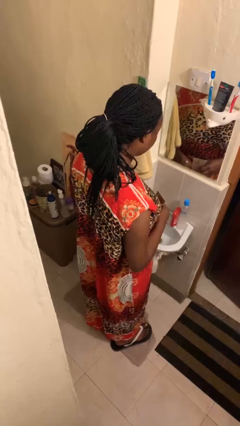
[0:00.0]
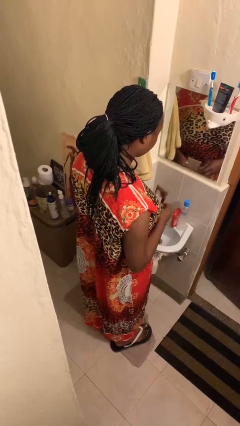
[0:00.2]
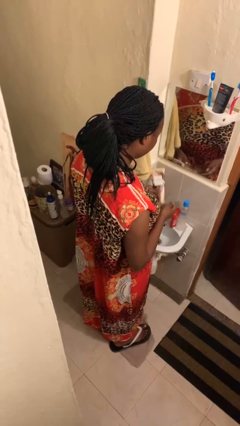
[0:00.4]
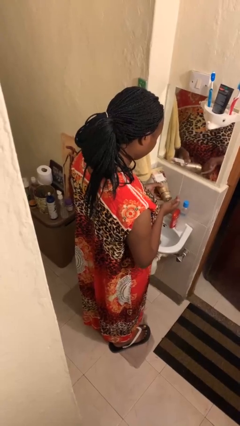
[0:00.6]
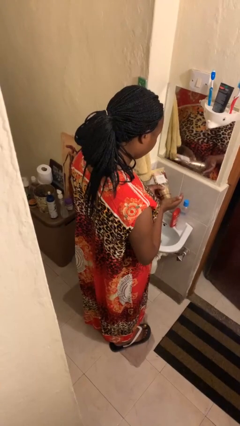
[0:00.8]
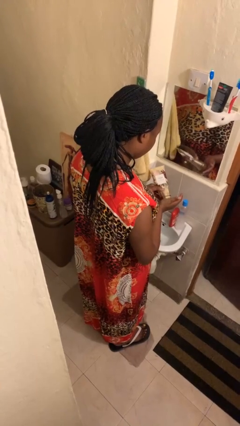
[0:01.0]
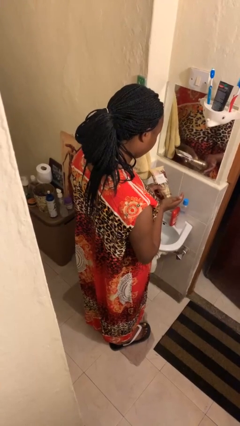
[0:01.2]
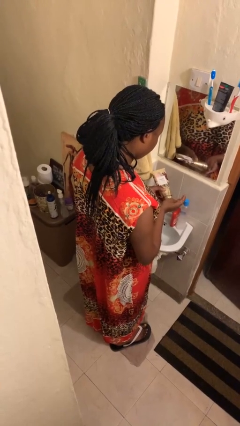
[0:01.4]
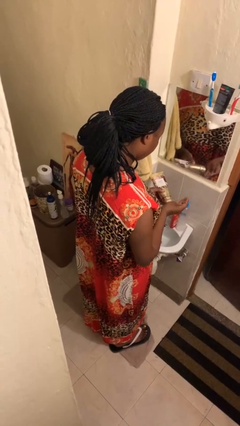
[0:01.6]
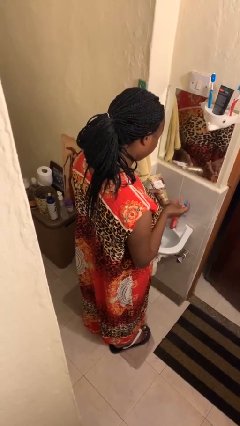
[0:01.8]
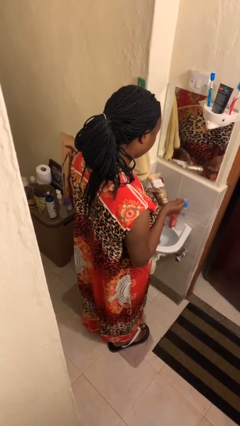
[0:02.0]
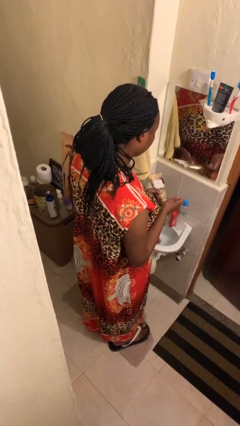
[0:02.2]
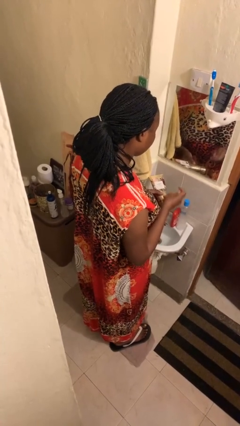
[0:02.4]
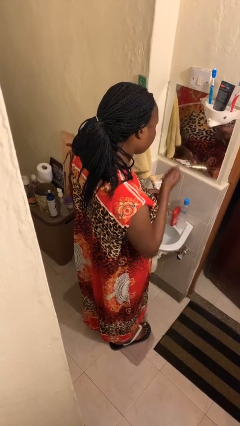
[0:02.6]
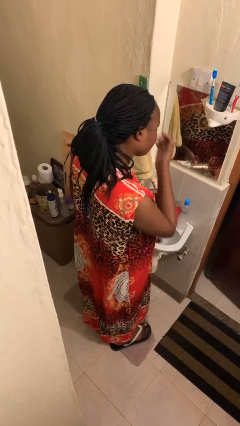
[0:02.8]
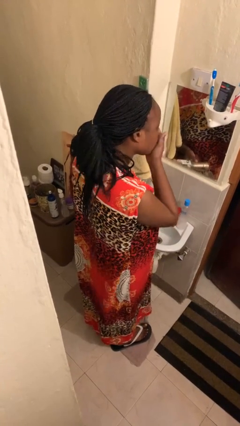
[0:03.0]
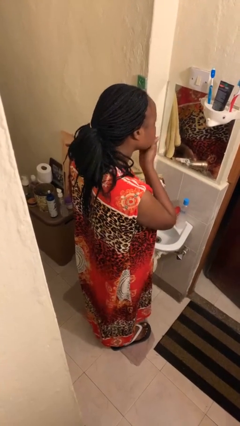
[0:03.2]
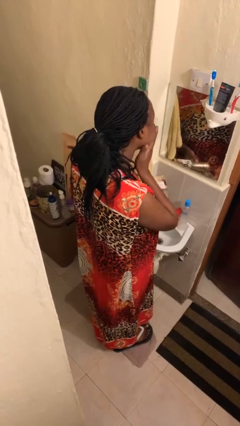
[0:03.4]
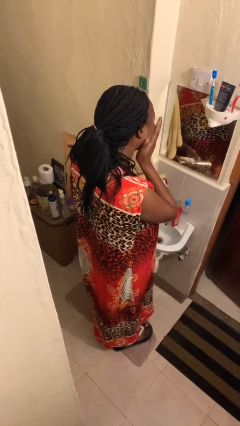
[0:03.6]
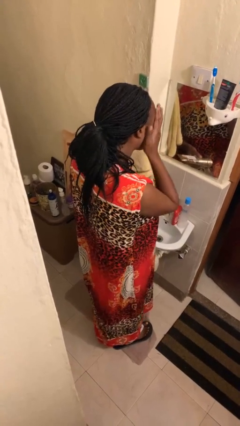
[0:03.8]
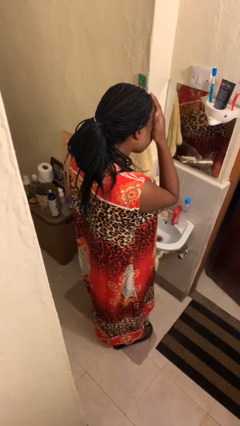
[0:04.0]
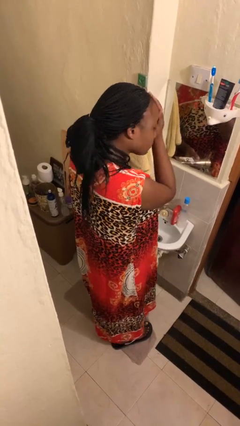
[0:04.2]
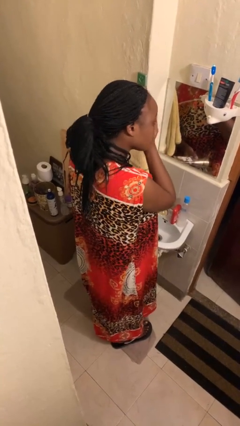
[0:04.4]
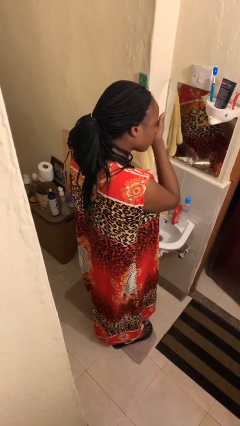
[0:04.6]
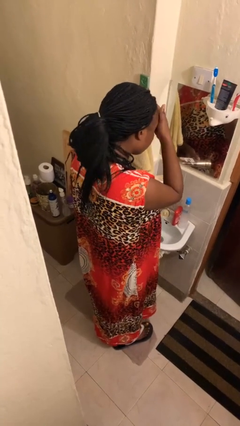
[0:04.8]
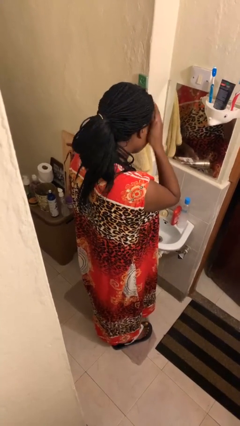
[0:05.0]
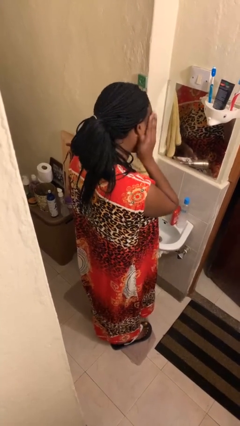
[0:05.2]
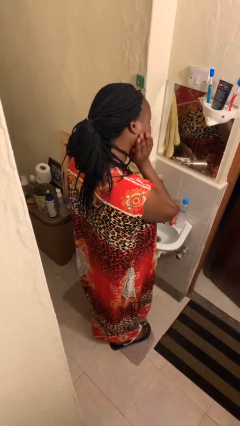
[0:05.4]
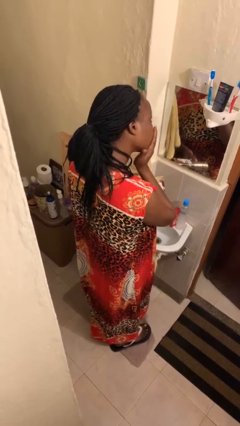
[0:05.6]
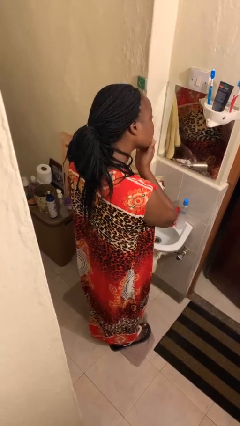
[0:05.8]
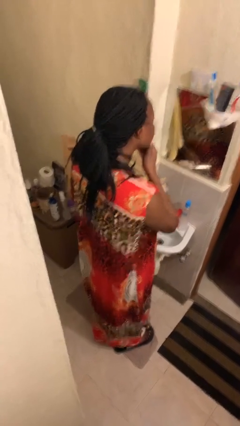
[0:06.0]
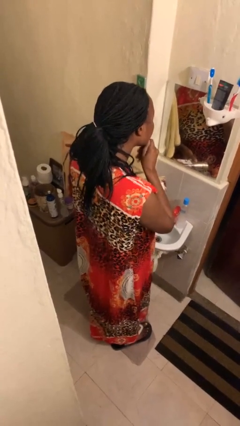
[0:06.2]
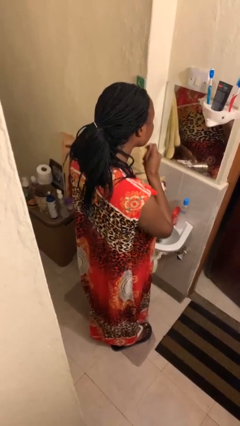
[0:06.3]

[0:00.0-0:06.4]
person applies facial moisturizer

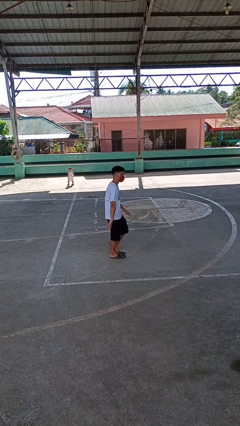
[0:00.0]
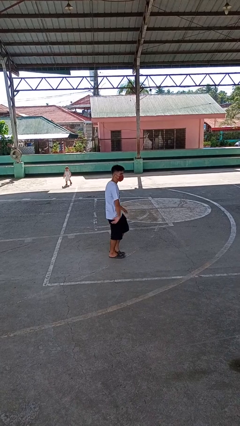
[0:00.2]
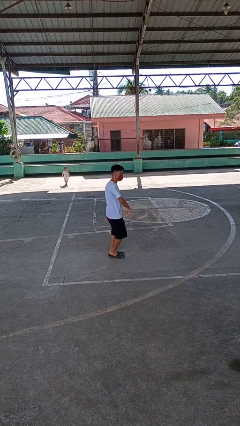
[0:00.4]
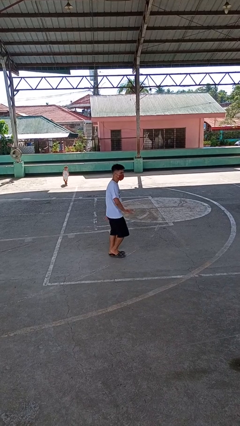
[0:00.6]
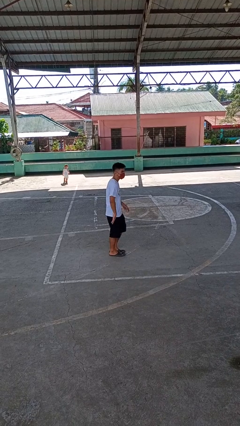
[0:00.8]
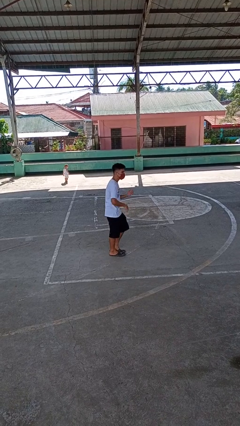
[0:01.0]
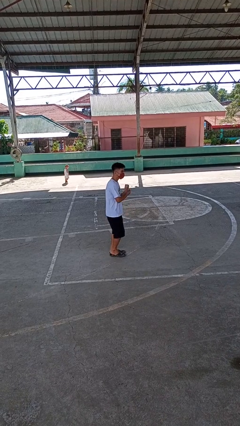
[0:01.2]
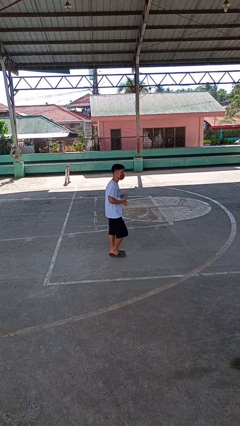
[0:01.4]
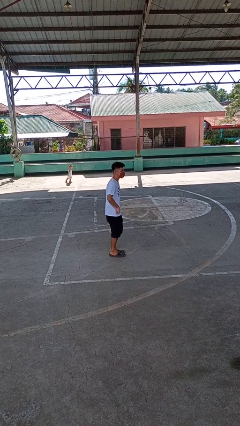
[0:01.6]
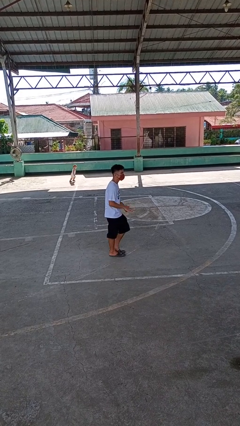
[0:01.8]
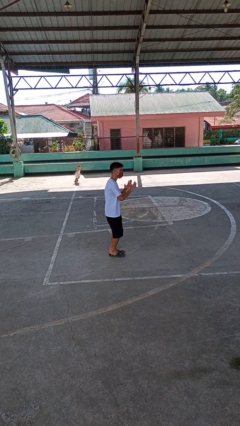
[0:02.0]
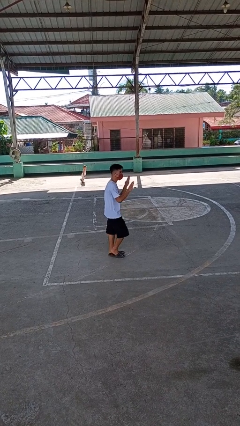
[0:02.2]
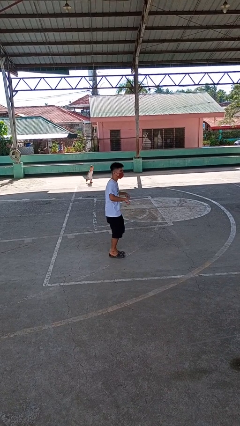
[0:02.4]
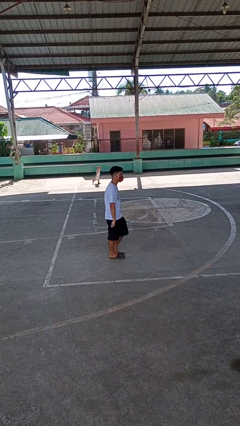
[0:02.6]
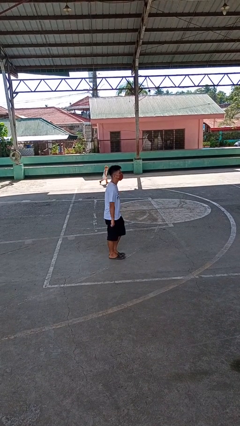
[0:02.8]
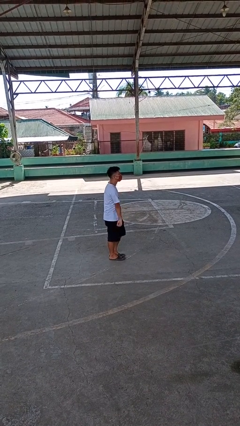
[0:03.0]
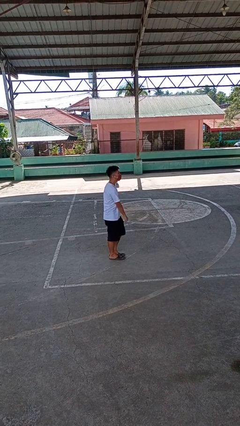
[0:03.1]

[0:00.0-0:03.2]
person dances in place

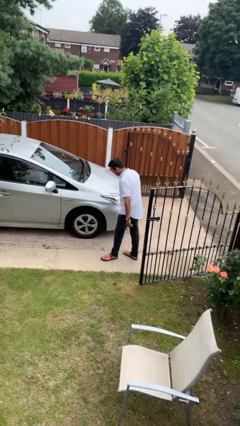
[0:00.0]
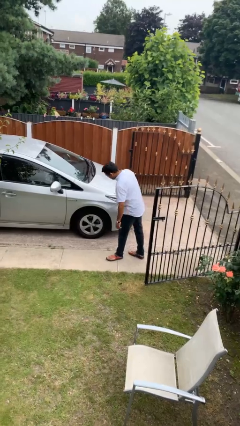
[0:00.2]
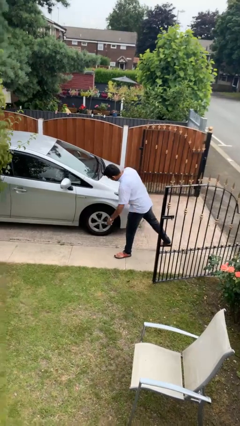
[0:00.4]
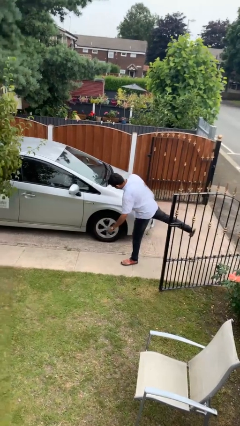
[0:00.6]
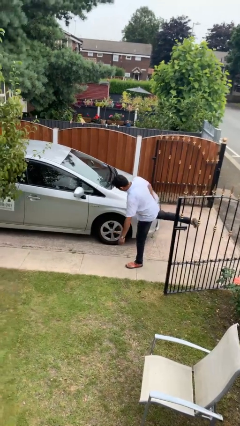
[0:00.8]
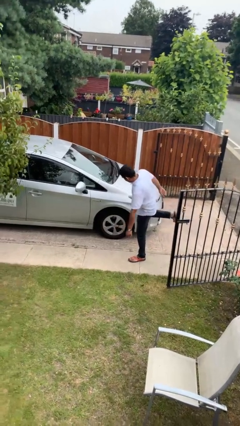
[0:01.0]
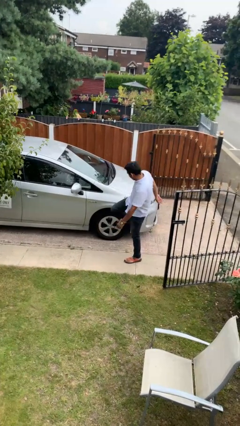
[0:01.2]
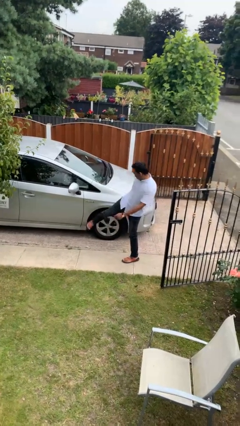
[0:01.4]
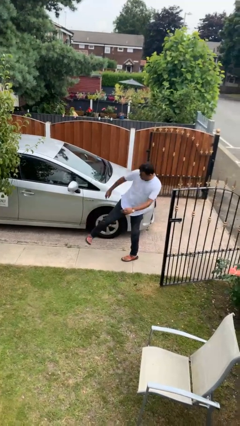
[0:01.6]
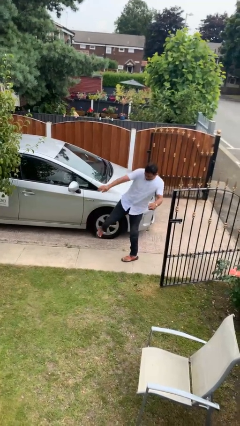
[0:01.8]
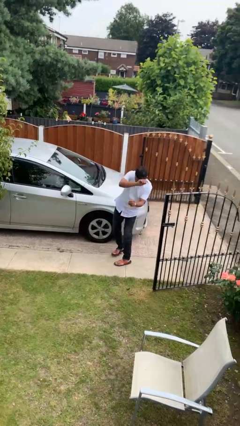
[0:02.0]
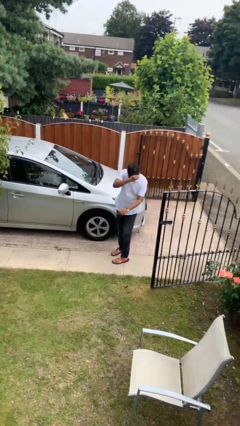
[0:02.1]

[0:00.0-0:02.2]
person kicks car tires

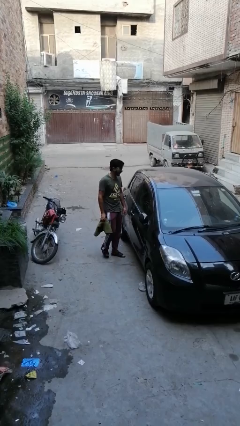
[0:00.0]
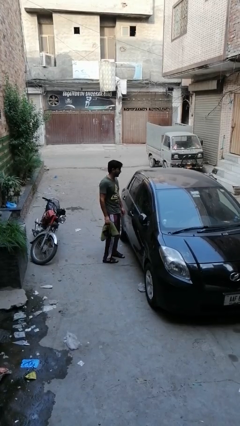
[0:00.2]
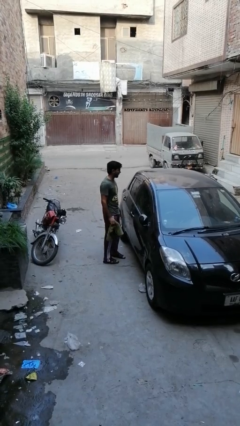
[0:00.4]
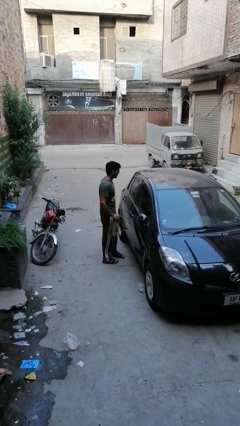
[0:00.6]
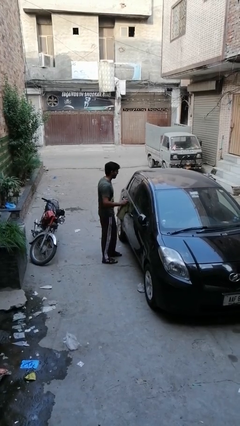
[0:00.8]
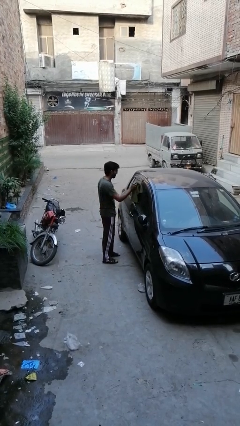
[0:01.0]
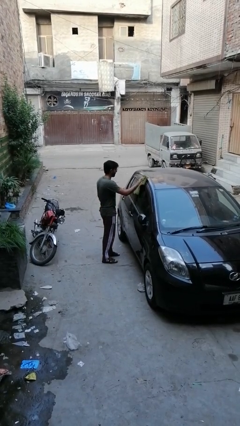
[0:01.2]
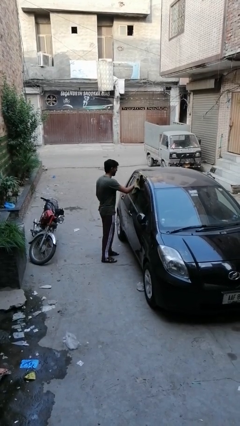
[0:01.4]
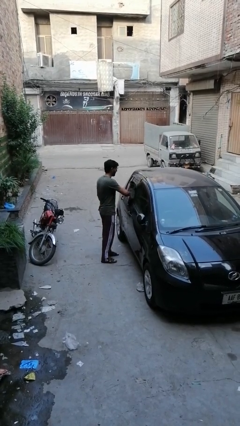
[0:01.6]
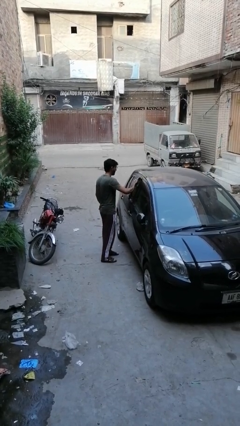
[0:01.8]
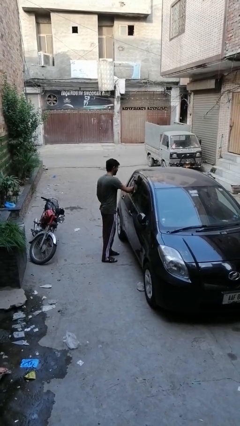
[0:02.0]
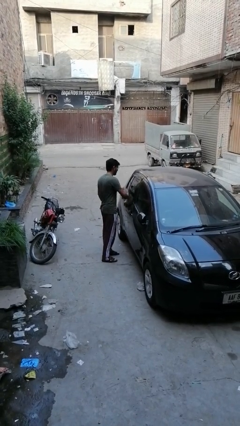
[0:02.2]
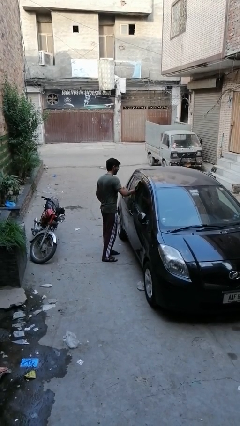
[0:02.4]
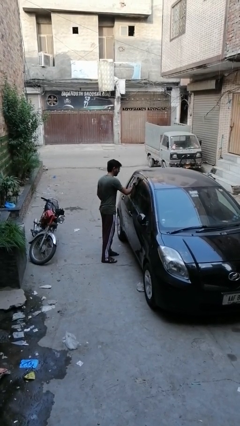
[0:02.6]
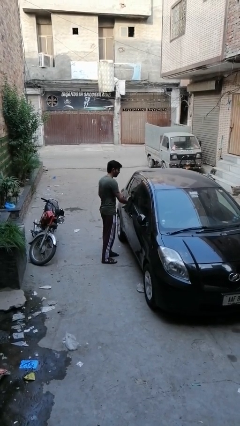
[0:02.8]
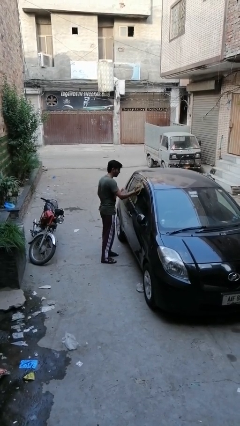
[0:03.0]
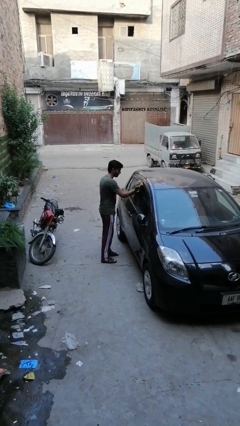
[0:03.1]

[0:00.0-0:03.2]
person polishes car with rag

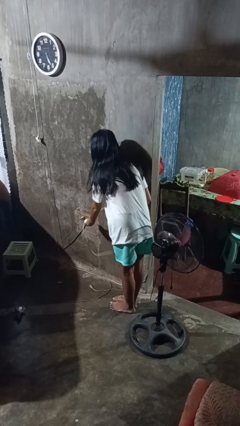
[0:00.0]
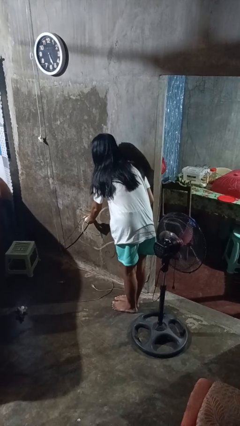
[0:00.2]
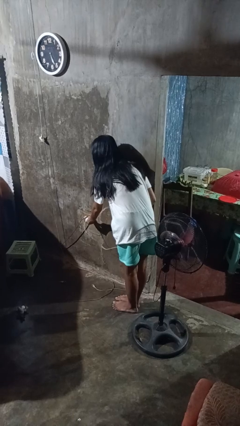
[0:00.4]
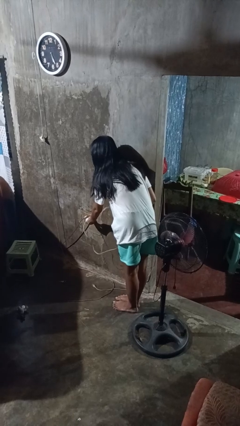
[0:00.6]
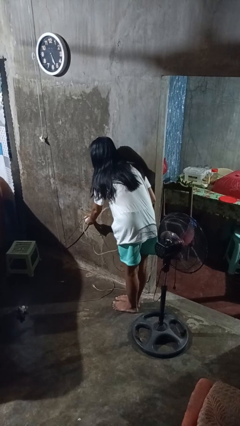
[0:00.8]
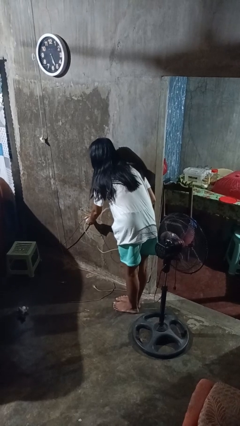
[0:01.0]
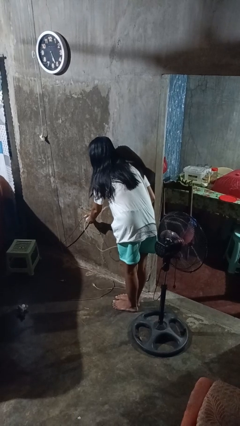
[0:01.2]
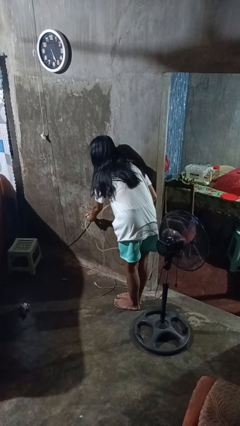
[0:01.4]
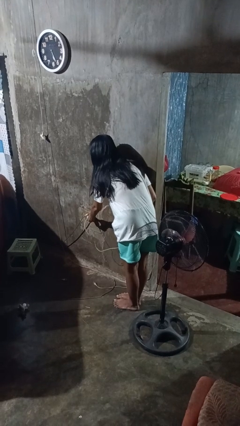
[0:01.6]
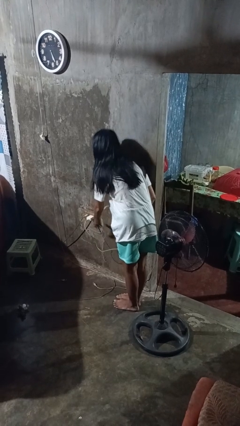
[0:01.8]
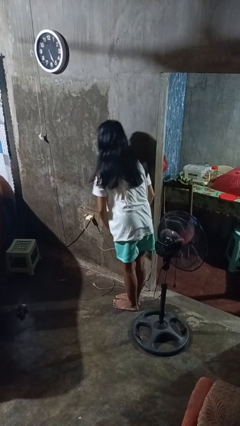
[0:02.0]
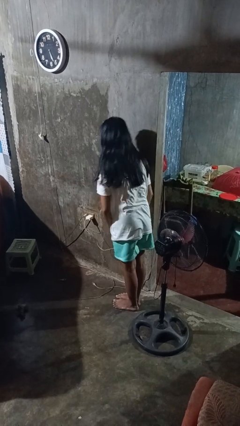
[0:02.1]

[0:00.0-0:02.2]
person plugs into electrical socket
